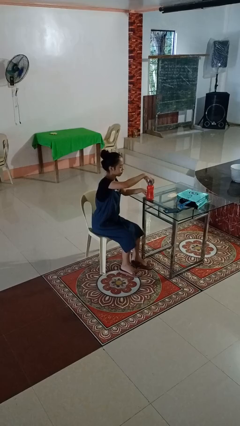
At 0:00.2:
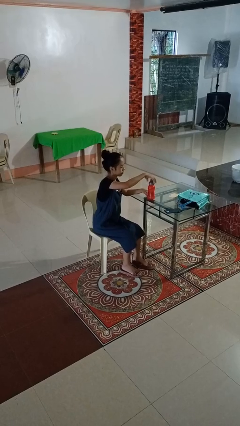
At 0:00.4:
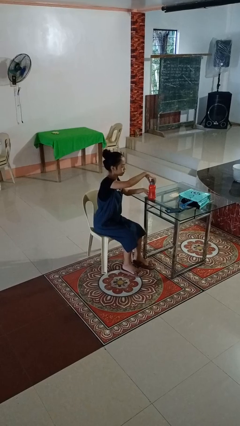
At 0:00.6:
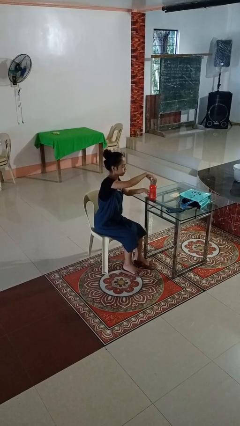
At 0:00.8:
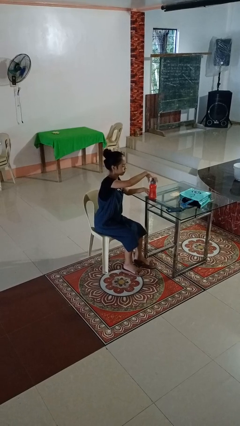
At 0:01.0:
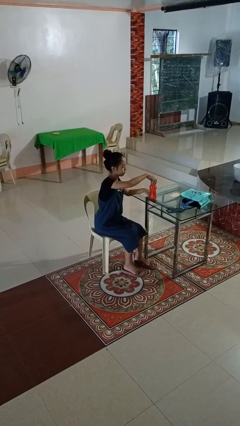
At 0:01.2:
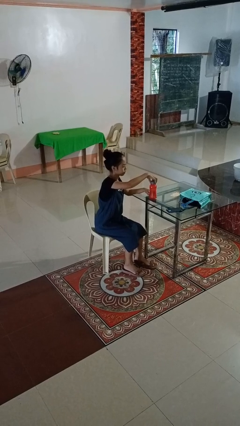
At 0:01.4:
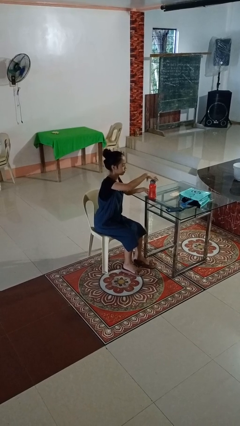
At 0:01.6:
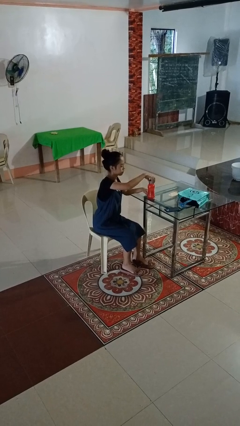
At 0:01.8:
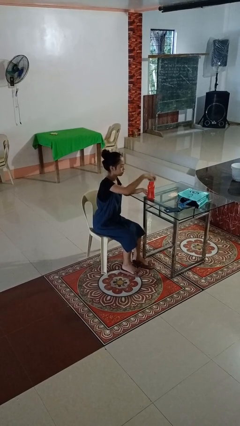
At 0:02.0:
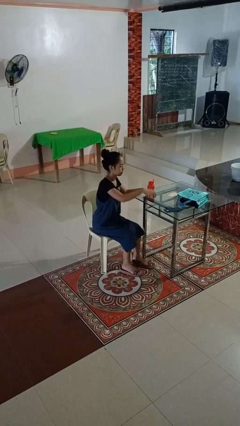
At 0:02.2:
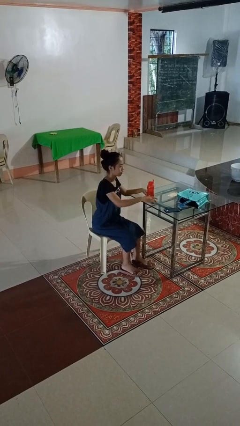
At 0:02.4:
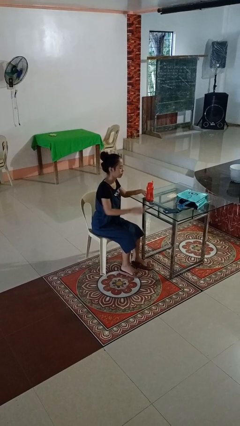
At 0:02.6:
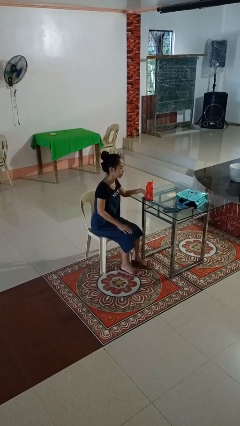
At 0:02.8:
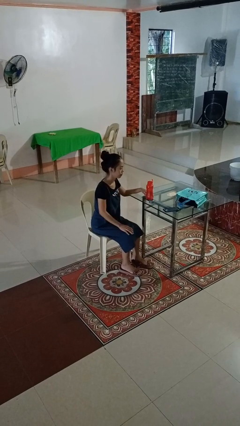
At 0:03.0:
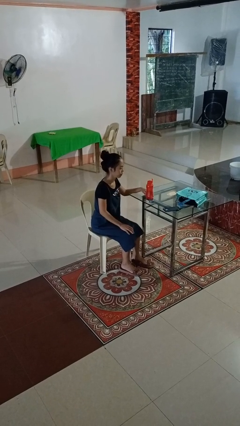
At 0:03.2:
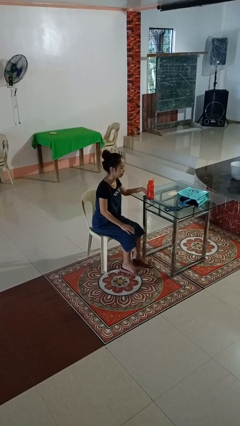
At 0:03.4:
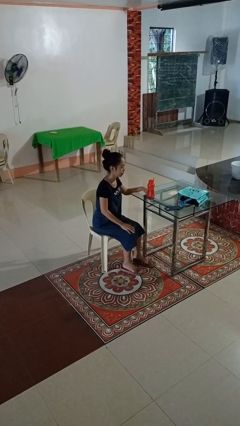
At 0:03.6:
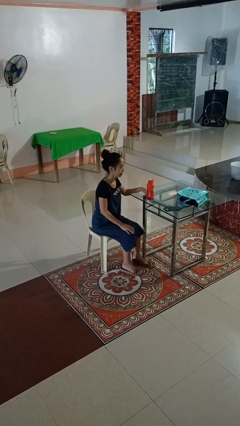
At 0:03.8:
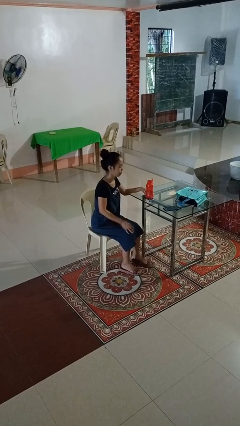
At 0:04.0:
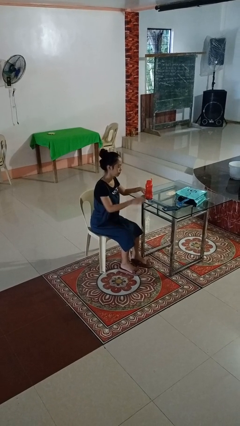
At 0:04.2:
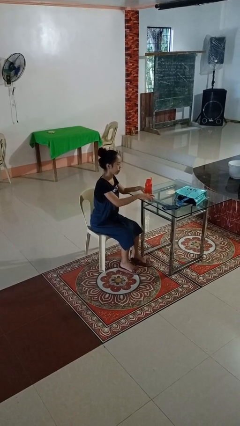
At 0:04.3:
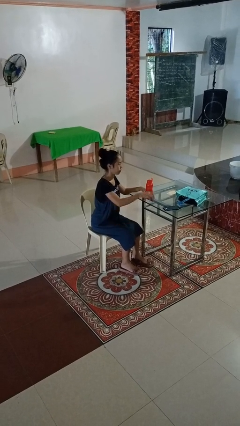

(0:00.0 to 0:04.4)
person unscrews lid from bottle

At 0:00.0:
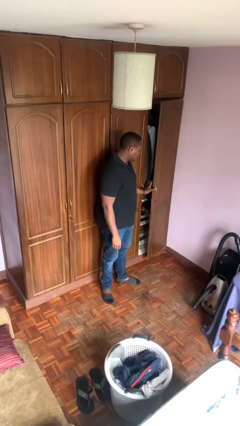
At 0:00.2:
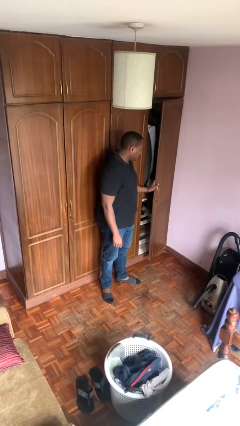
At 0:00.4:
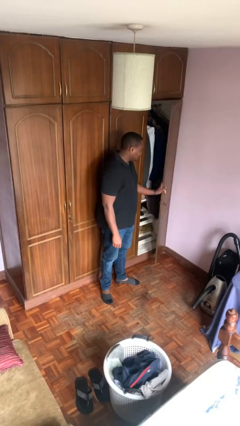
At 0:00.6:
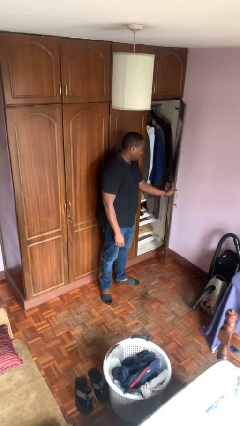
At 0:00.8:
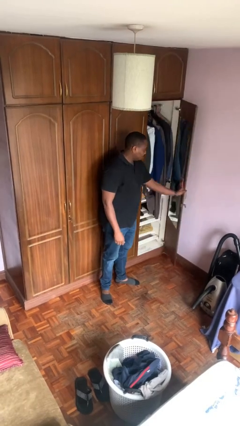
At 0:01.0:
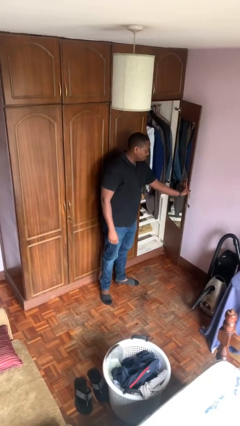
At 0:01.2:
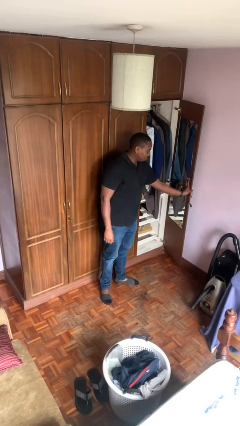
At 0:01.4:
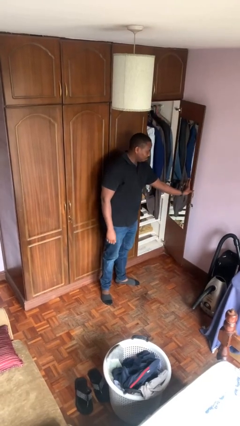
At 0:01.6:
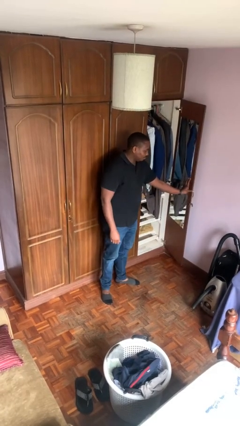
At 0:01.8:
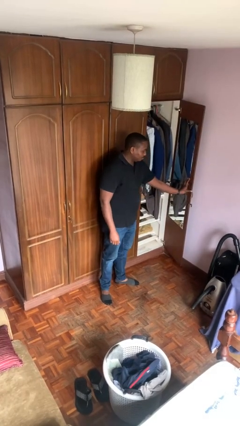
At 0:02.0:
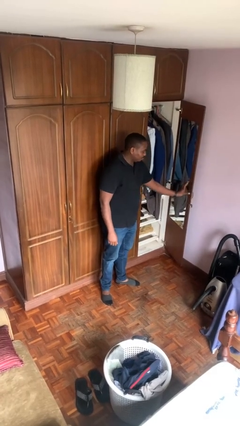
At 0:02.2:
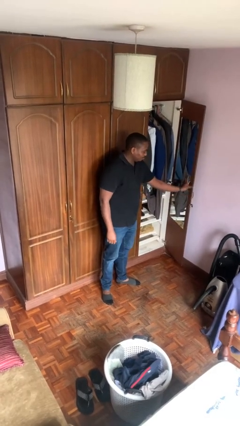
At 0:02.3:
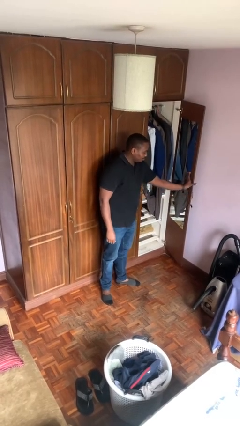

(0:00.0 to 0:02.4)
person opens closet door

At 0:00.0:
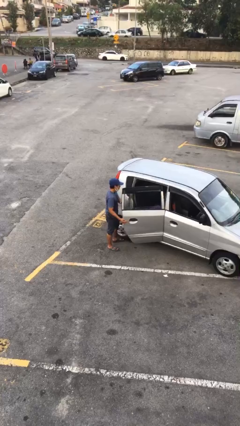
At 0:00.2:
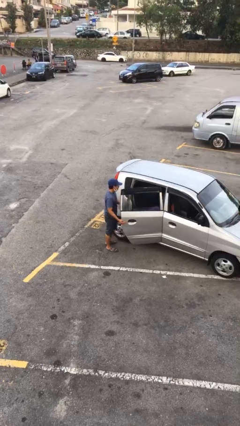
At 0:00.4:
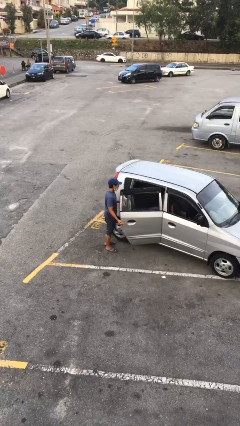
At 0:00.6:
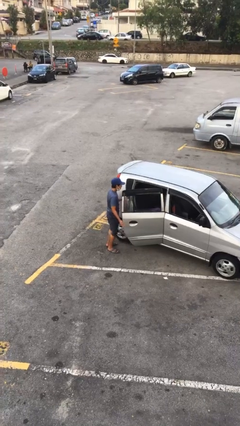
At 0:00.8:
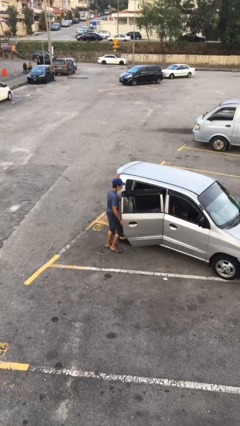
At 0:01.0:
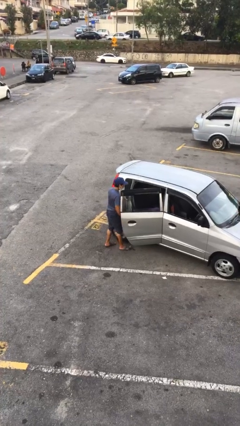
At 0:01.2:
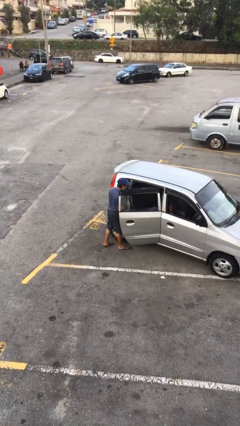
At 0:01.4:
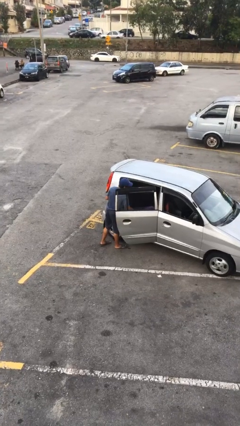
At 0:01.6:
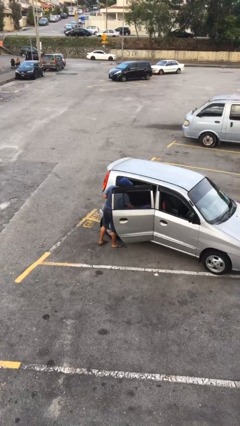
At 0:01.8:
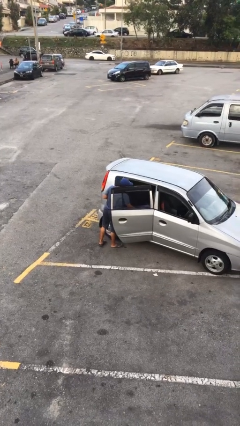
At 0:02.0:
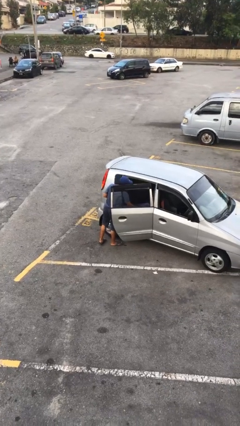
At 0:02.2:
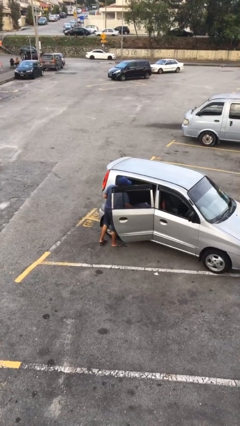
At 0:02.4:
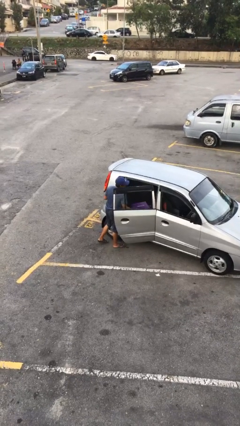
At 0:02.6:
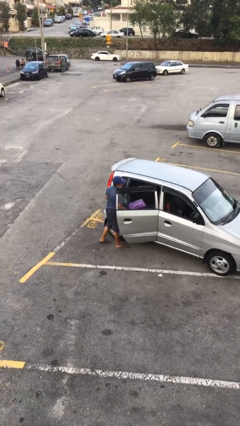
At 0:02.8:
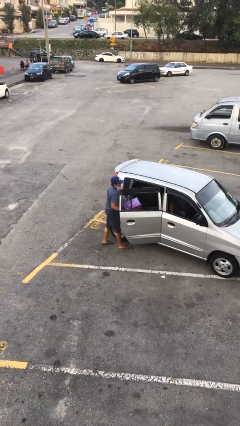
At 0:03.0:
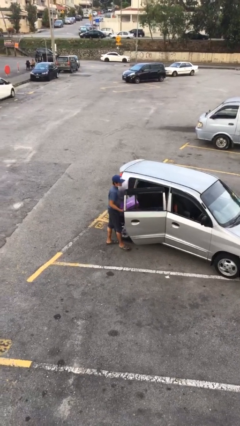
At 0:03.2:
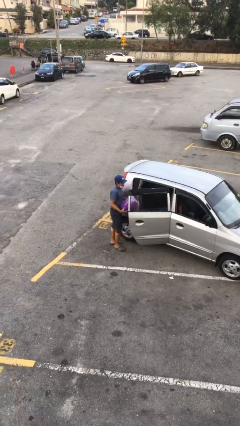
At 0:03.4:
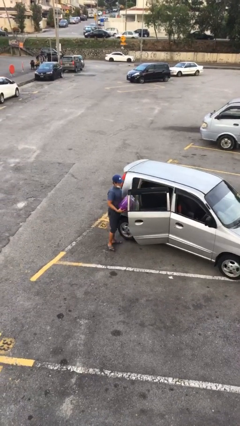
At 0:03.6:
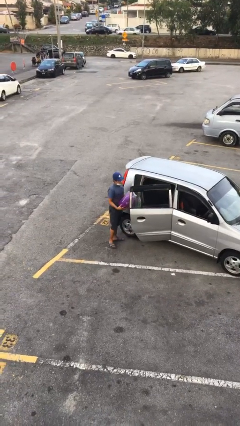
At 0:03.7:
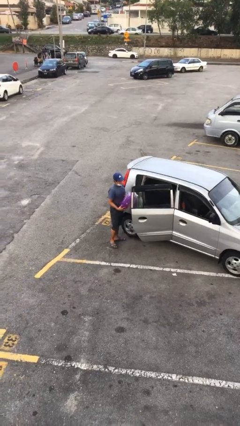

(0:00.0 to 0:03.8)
person unloads car

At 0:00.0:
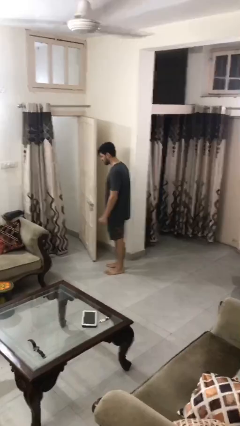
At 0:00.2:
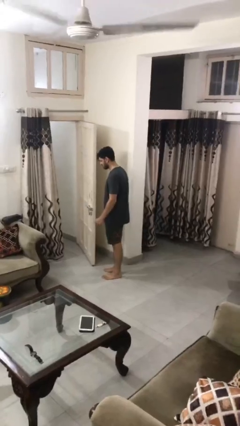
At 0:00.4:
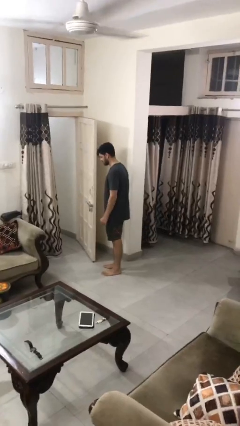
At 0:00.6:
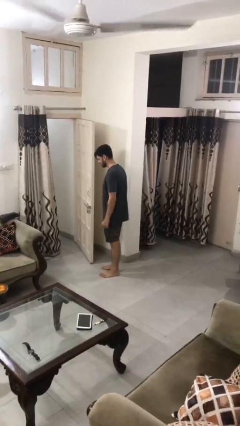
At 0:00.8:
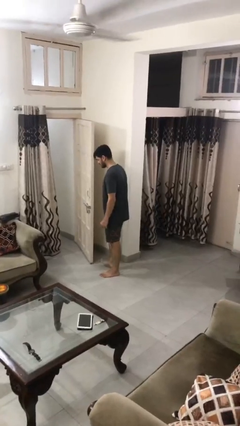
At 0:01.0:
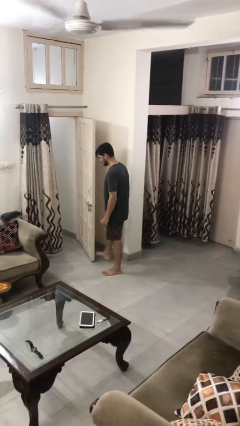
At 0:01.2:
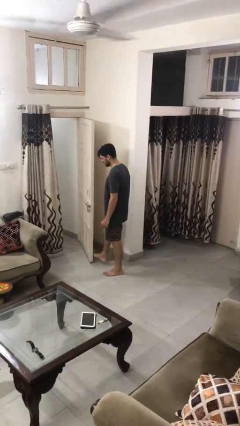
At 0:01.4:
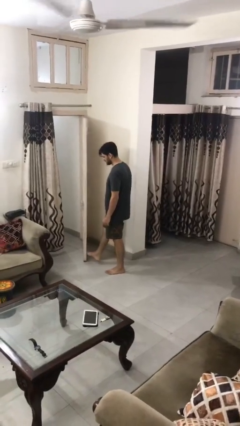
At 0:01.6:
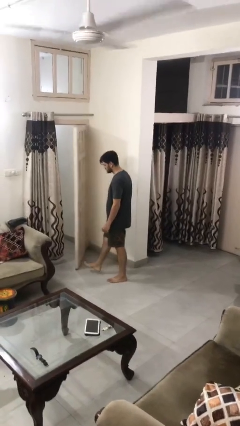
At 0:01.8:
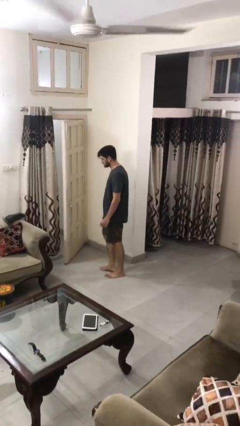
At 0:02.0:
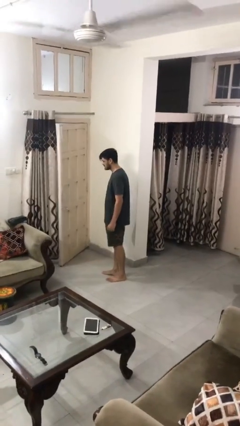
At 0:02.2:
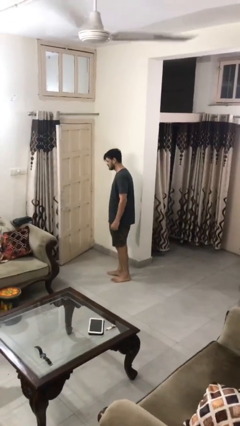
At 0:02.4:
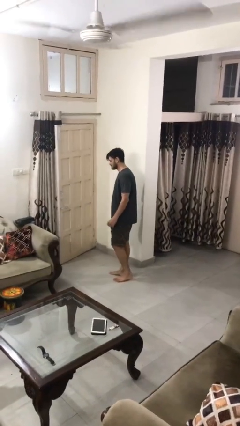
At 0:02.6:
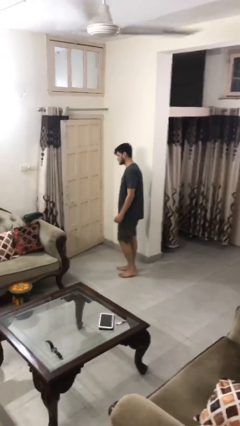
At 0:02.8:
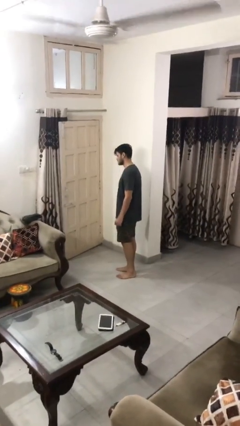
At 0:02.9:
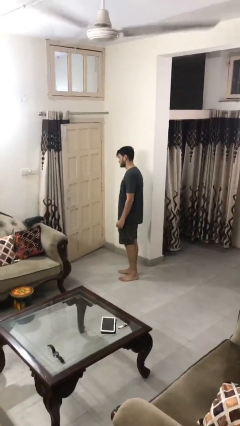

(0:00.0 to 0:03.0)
person closes door with foot

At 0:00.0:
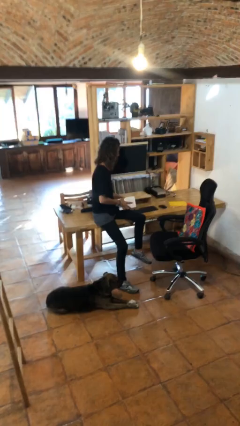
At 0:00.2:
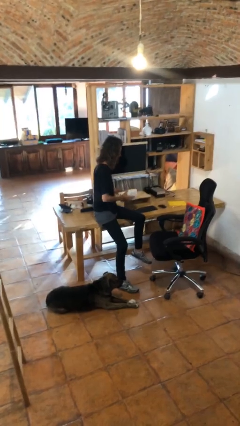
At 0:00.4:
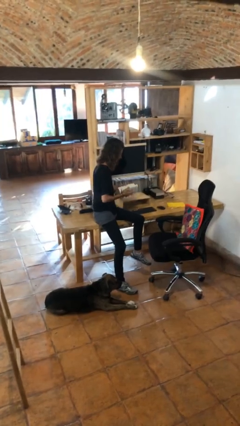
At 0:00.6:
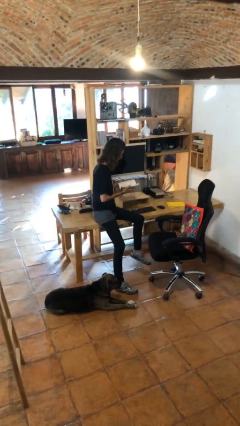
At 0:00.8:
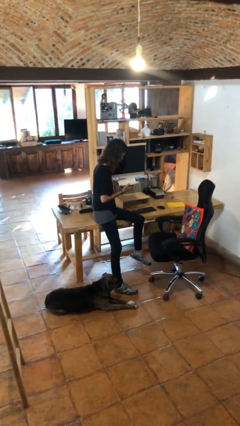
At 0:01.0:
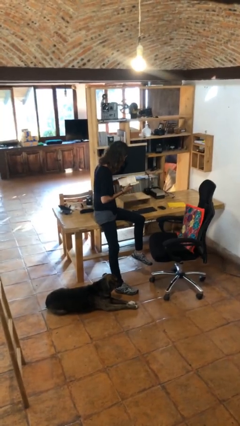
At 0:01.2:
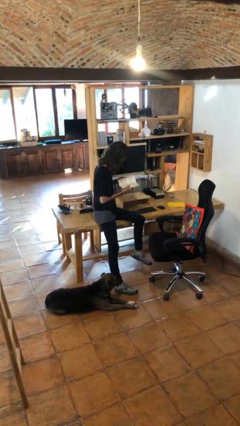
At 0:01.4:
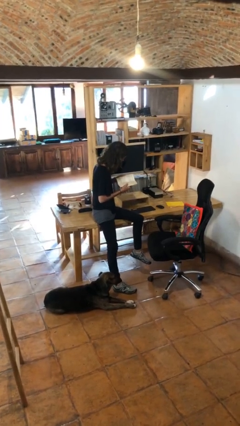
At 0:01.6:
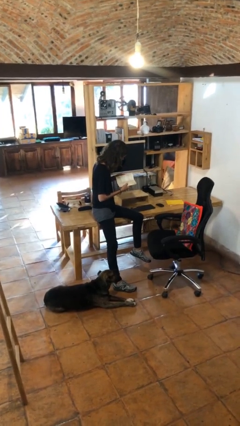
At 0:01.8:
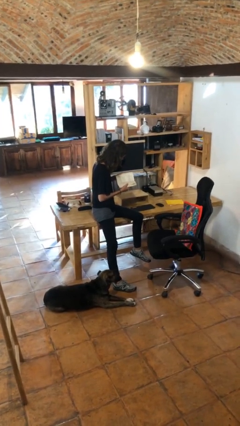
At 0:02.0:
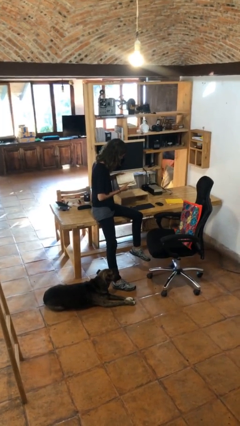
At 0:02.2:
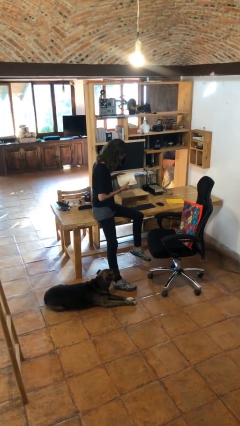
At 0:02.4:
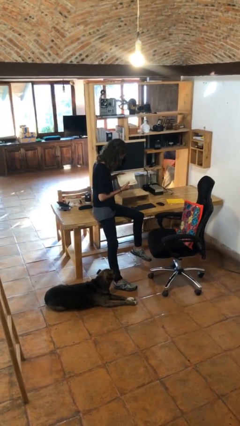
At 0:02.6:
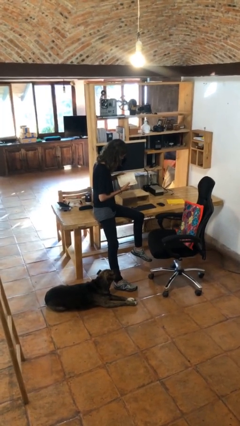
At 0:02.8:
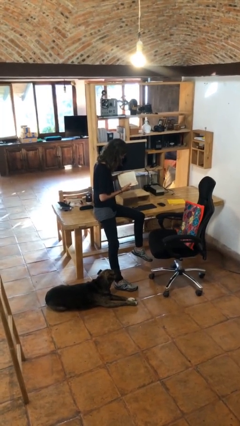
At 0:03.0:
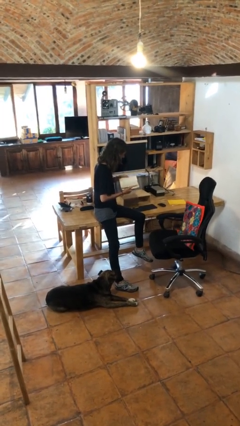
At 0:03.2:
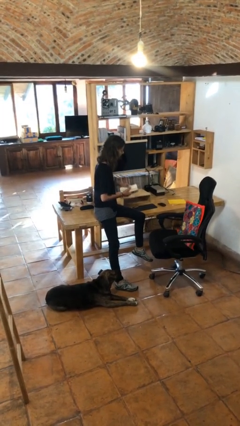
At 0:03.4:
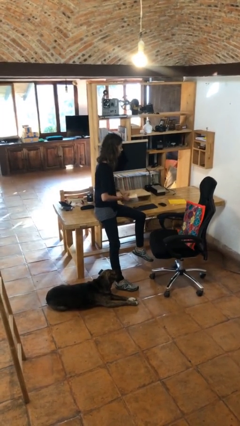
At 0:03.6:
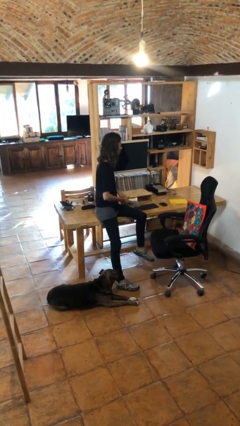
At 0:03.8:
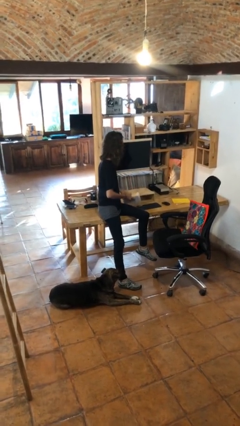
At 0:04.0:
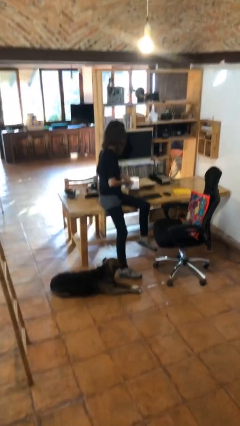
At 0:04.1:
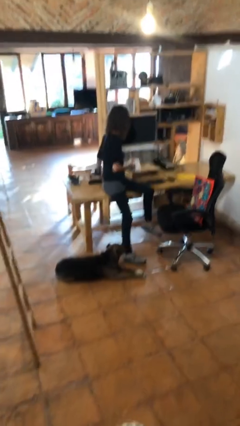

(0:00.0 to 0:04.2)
person reads book
